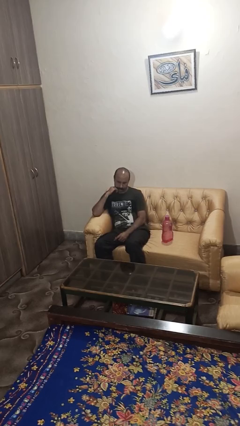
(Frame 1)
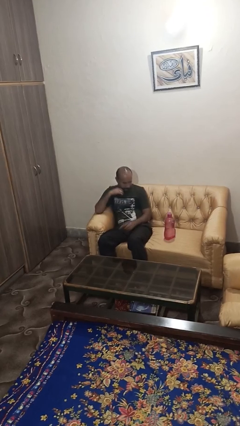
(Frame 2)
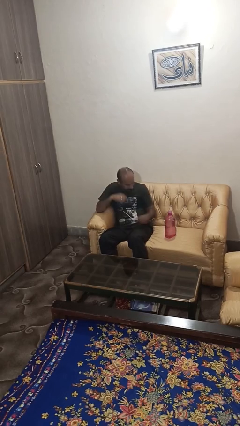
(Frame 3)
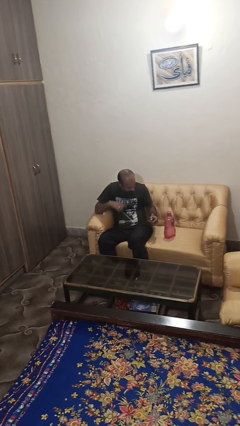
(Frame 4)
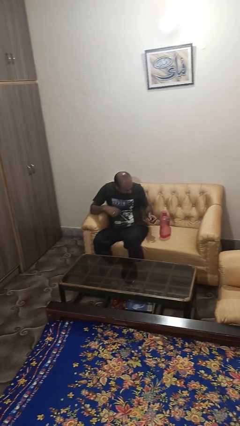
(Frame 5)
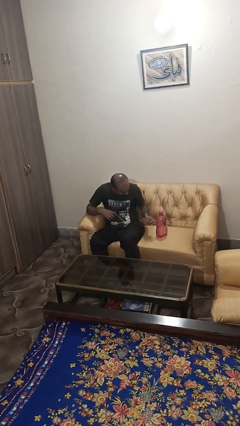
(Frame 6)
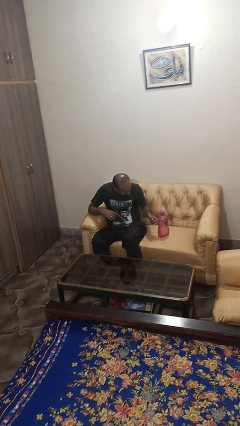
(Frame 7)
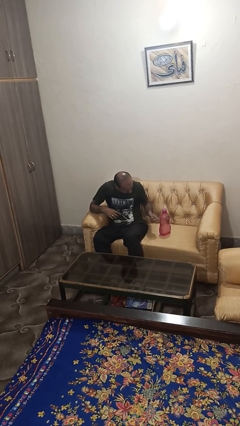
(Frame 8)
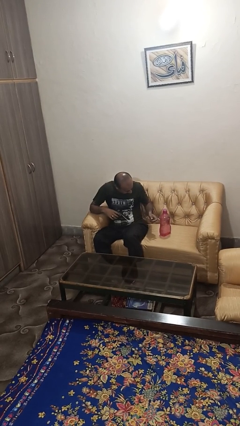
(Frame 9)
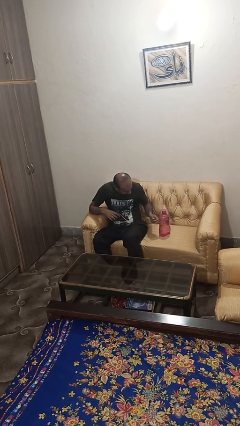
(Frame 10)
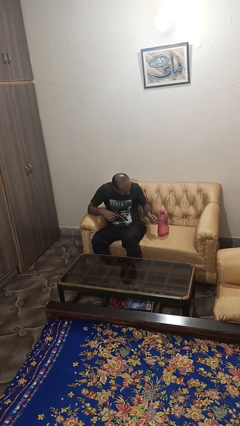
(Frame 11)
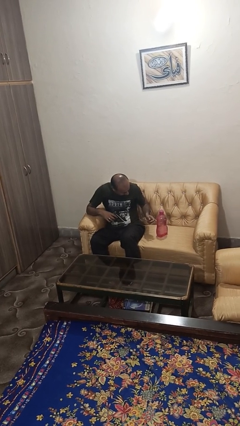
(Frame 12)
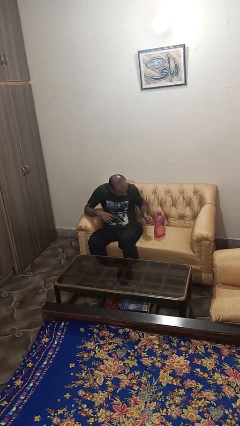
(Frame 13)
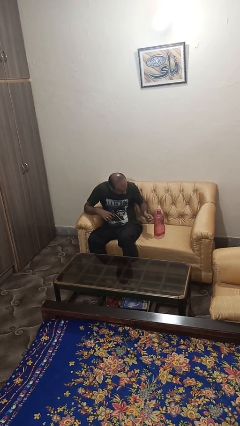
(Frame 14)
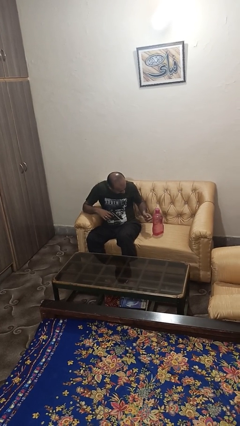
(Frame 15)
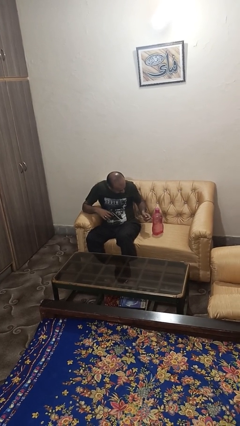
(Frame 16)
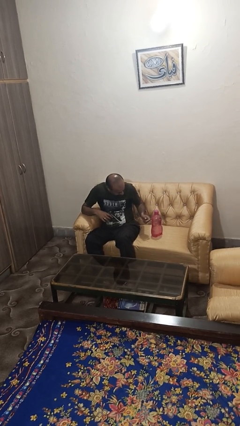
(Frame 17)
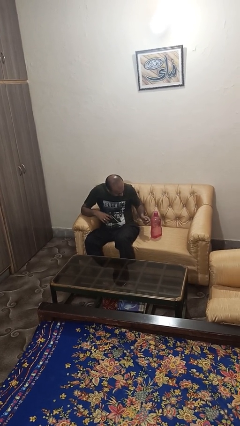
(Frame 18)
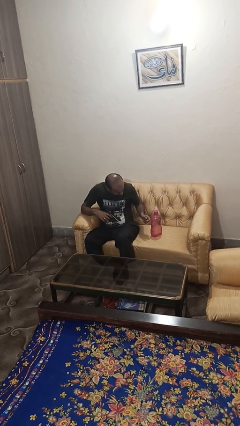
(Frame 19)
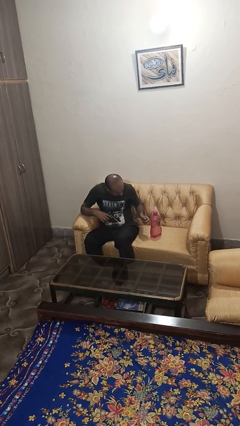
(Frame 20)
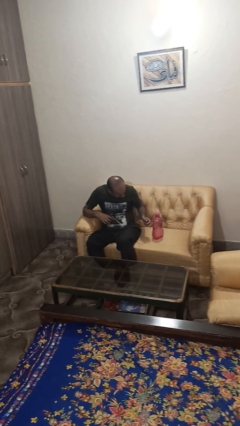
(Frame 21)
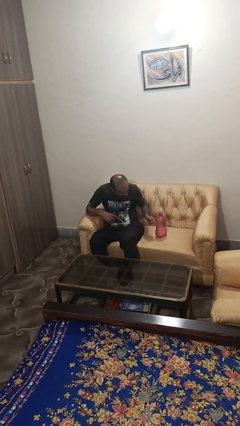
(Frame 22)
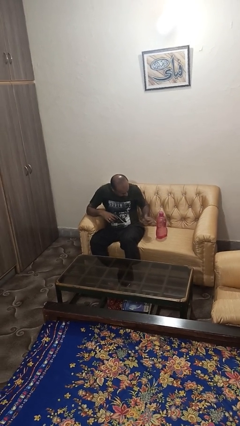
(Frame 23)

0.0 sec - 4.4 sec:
person taps object with finger

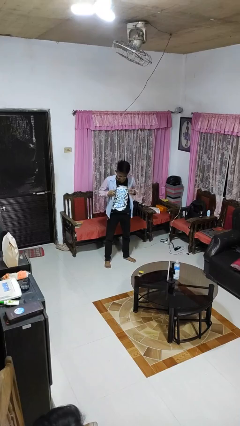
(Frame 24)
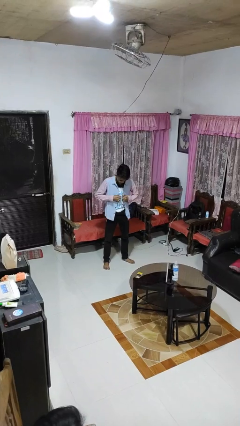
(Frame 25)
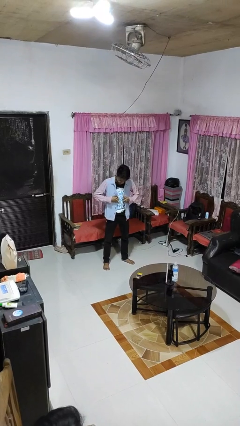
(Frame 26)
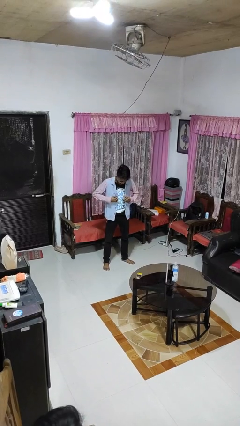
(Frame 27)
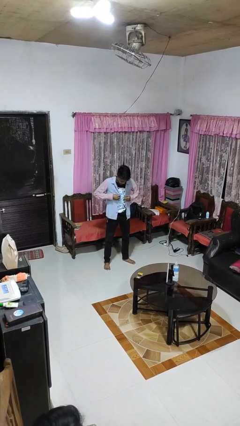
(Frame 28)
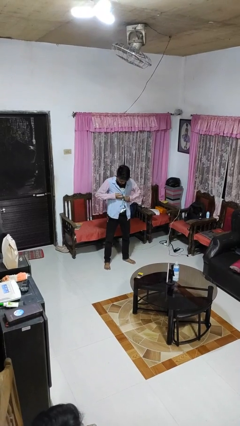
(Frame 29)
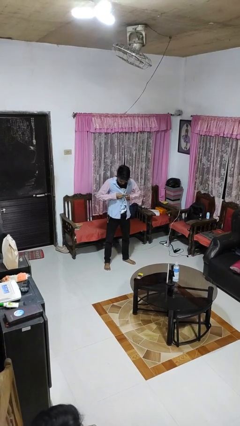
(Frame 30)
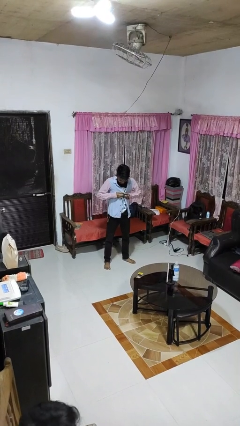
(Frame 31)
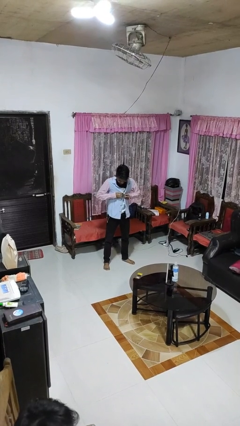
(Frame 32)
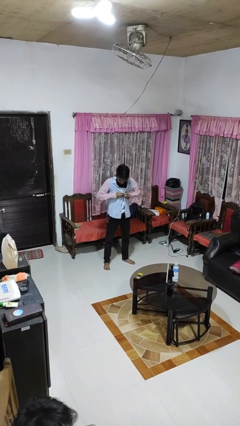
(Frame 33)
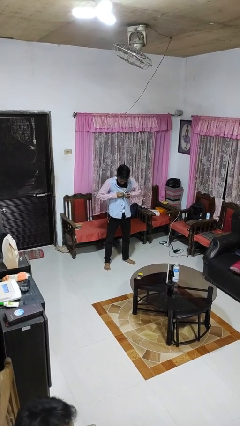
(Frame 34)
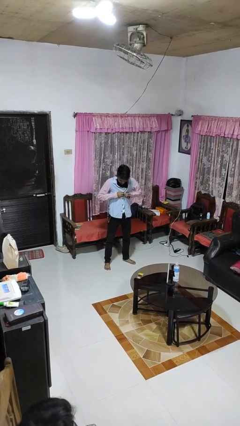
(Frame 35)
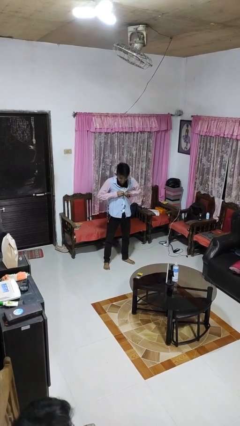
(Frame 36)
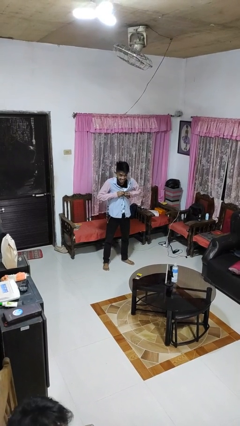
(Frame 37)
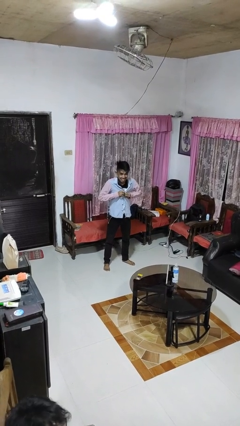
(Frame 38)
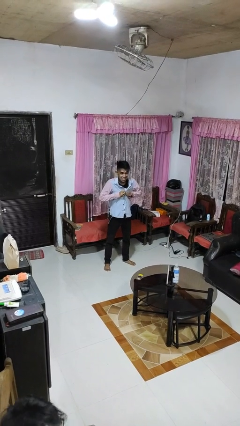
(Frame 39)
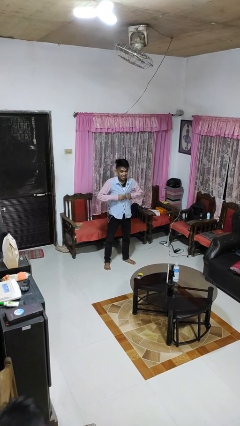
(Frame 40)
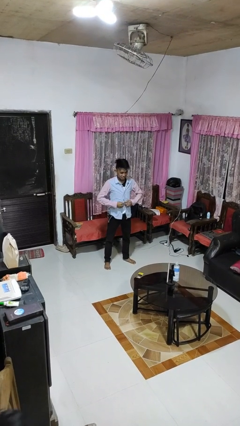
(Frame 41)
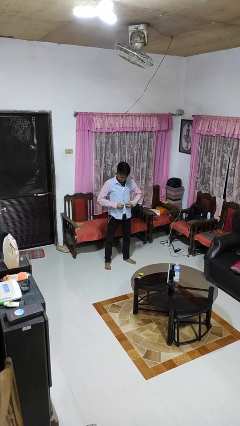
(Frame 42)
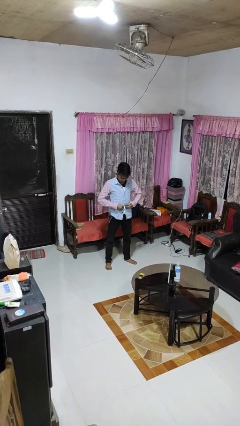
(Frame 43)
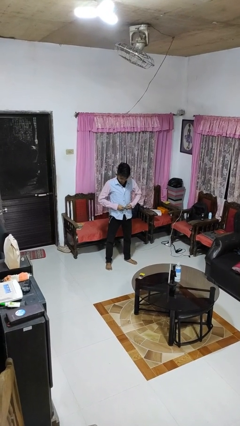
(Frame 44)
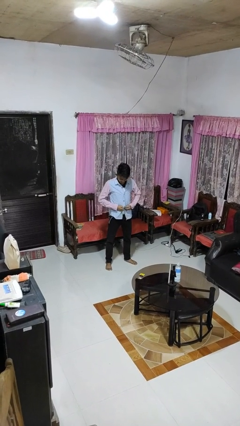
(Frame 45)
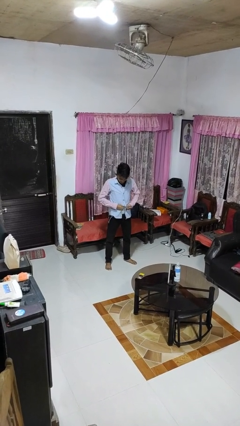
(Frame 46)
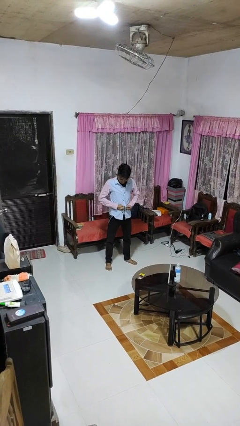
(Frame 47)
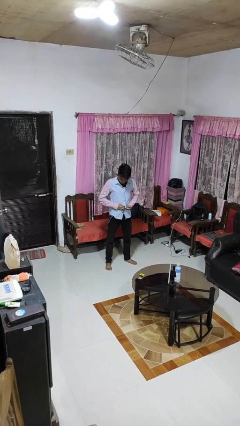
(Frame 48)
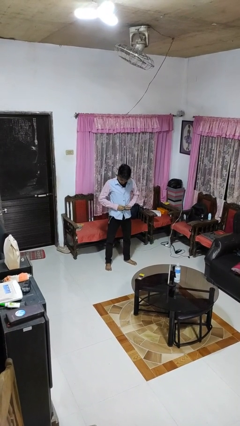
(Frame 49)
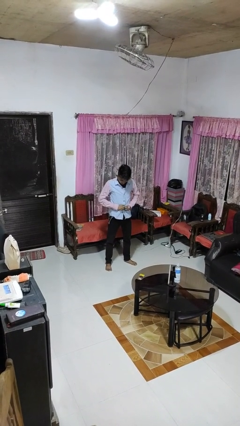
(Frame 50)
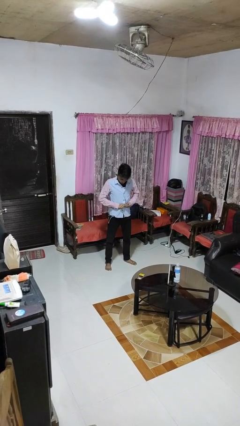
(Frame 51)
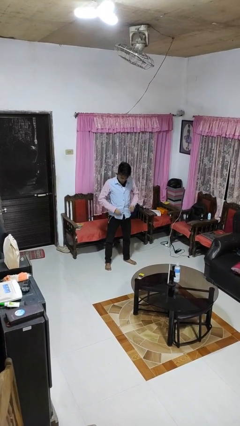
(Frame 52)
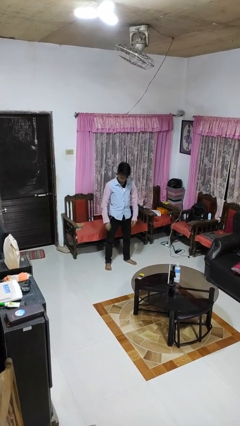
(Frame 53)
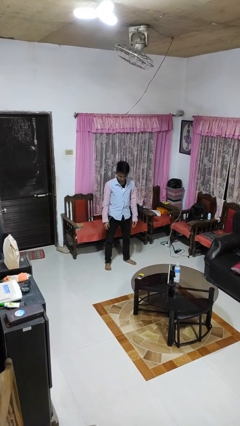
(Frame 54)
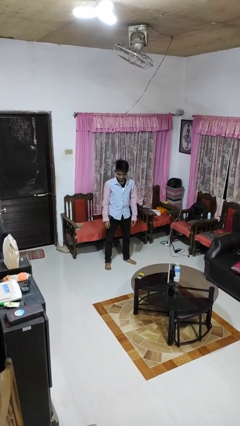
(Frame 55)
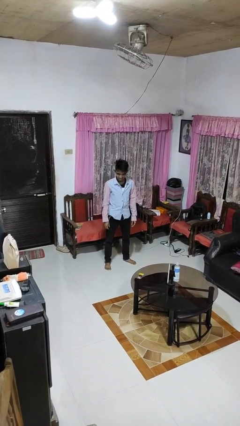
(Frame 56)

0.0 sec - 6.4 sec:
person buttons shirt

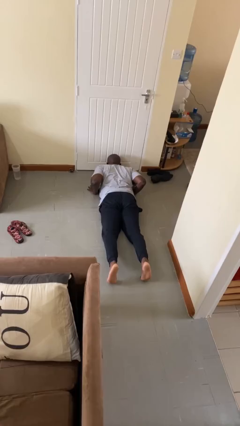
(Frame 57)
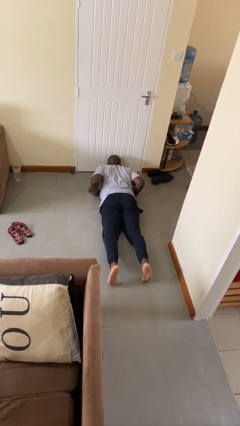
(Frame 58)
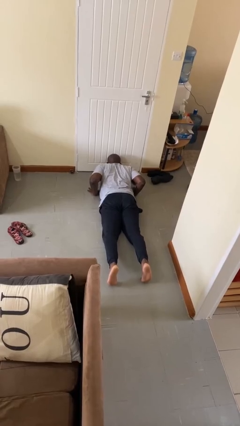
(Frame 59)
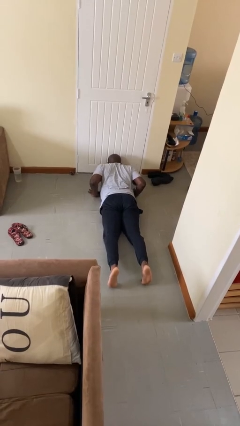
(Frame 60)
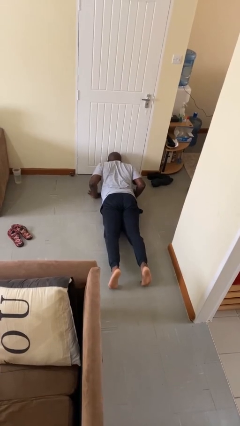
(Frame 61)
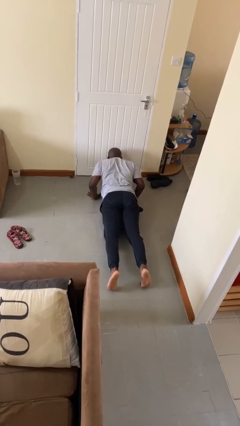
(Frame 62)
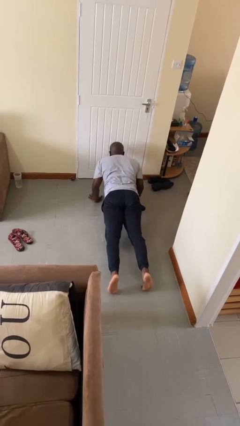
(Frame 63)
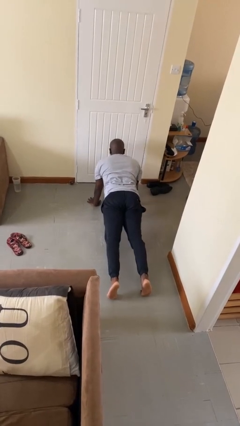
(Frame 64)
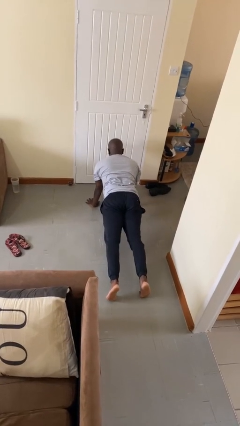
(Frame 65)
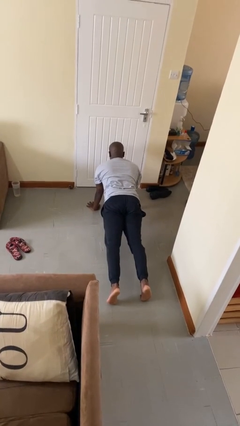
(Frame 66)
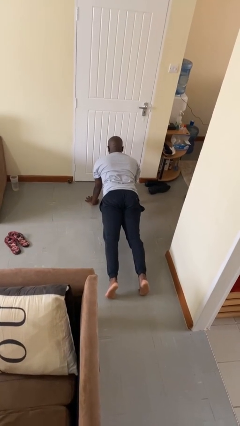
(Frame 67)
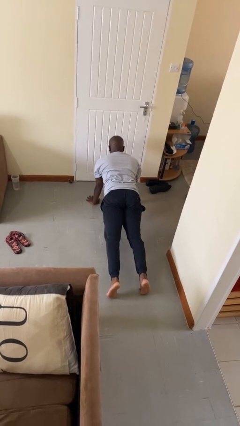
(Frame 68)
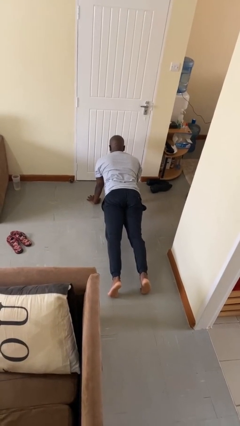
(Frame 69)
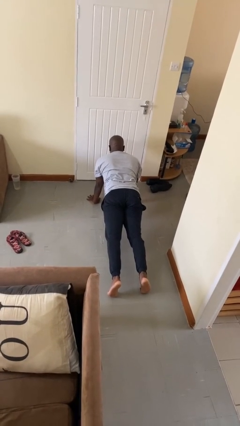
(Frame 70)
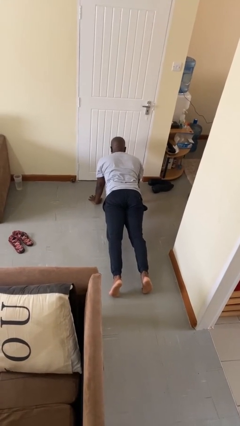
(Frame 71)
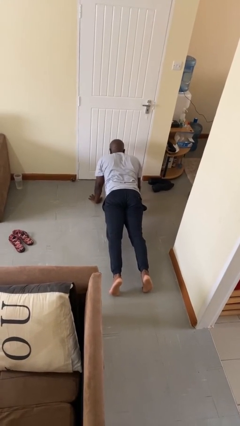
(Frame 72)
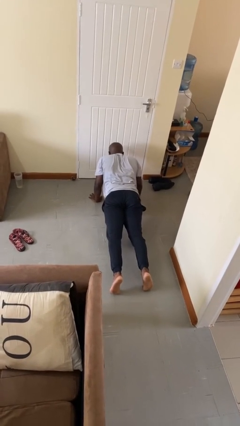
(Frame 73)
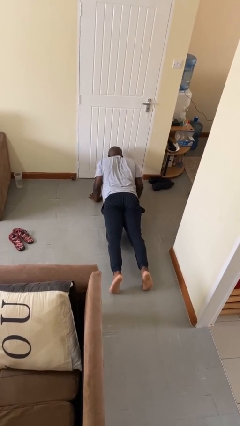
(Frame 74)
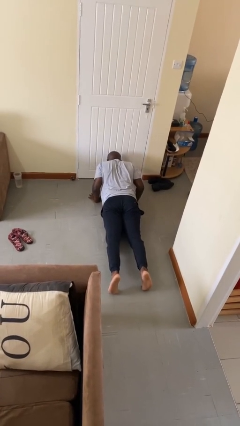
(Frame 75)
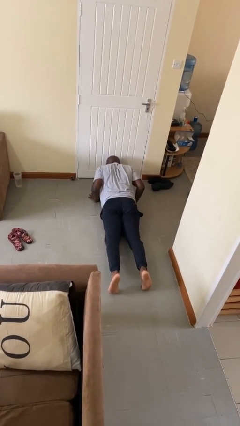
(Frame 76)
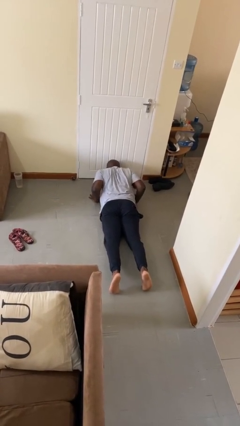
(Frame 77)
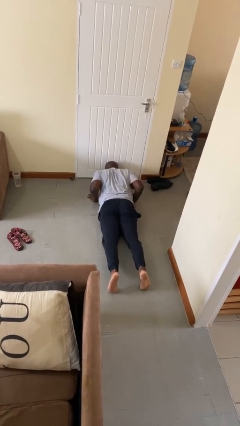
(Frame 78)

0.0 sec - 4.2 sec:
person exercises with pushup

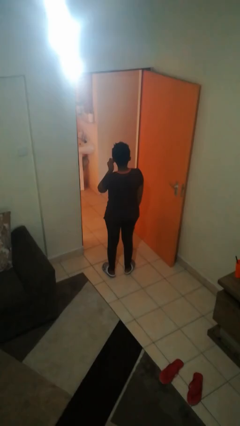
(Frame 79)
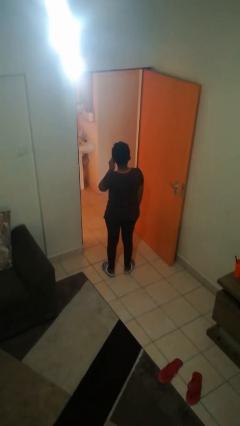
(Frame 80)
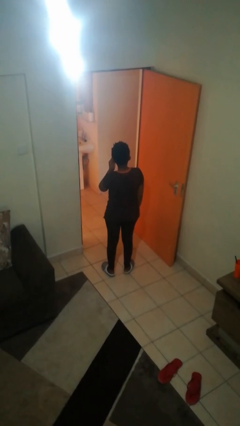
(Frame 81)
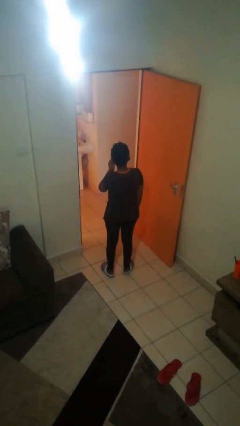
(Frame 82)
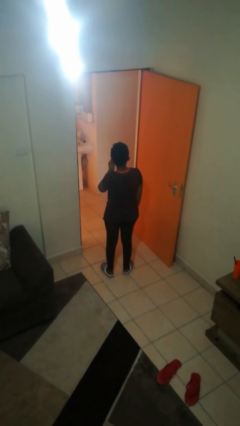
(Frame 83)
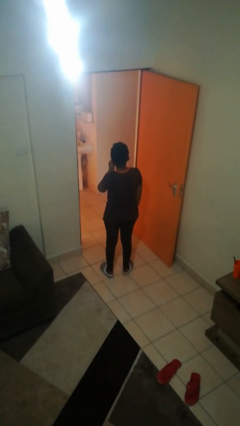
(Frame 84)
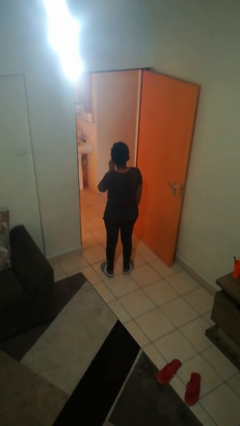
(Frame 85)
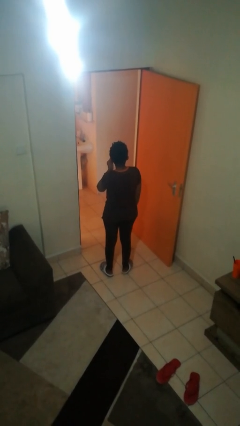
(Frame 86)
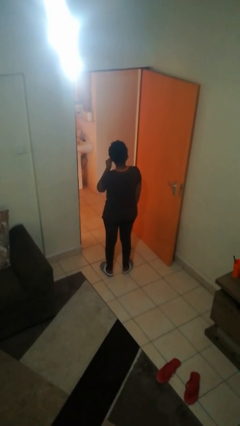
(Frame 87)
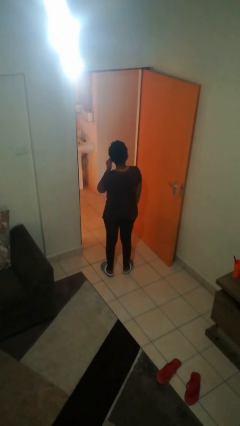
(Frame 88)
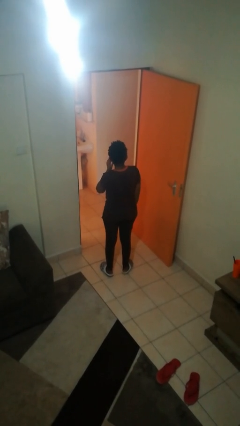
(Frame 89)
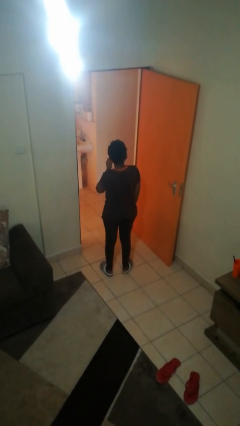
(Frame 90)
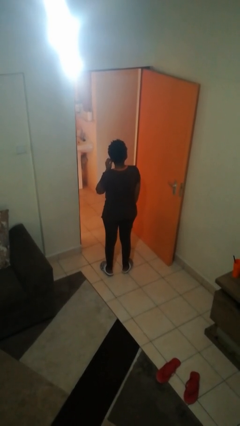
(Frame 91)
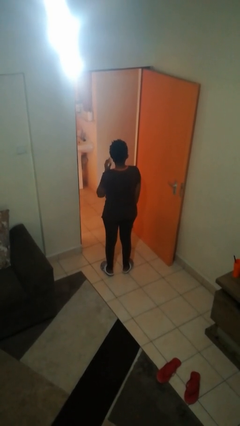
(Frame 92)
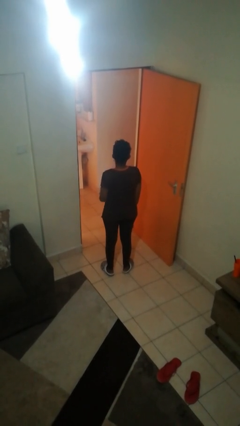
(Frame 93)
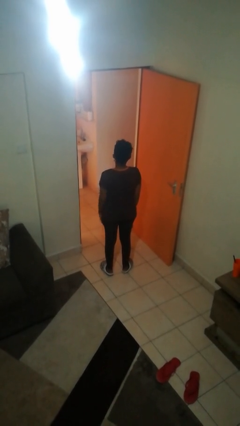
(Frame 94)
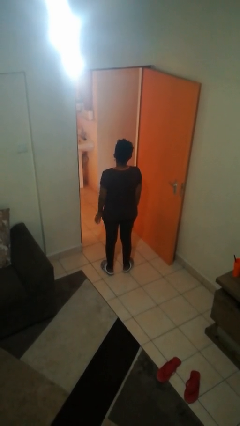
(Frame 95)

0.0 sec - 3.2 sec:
person puts on earrings
